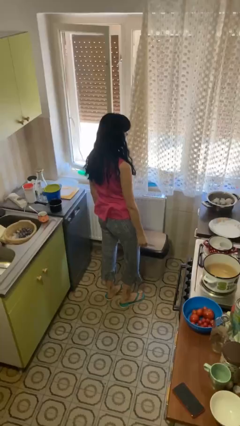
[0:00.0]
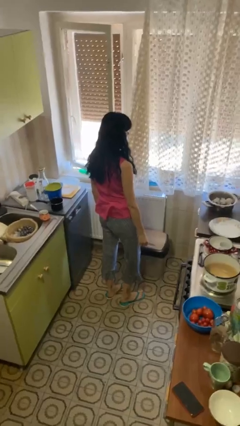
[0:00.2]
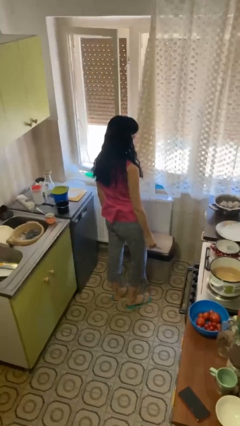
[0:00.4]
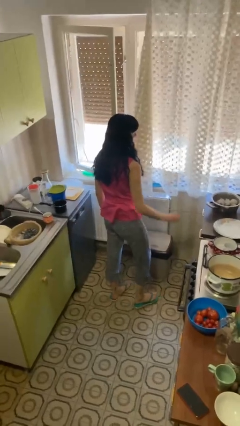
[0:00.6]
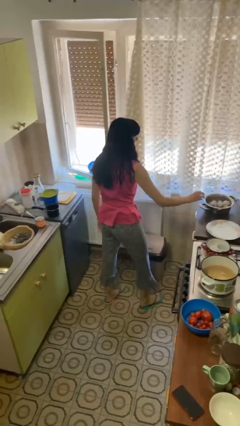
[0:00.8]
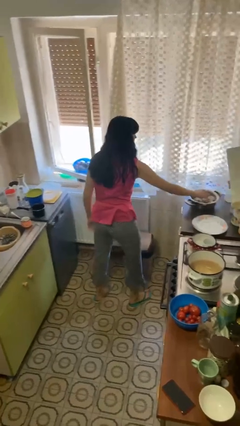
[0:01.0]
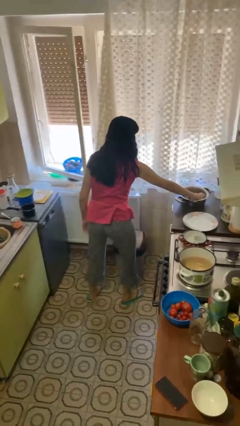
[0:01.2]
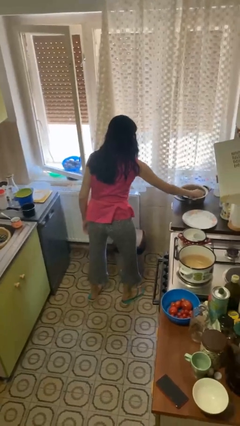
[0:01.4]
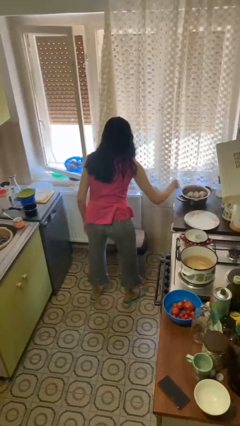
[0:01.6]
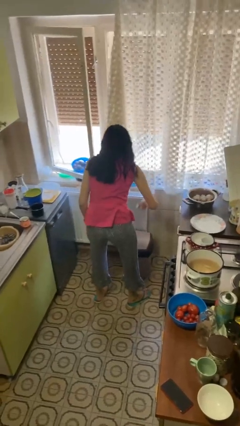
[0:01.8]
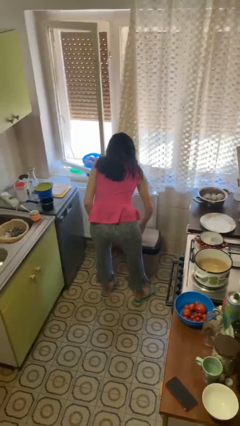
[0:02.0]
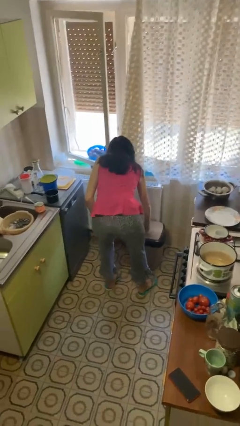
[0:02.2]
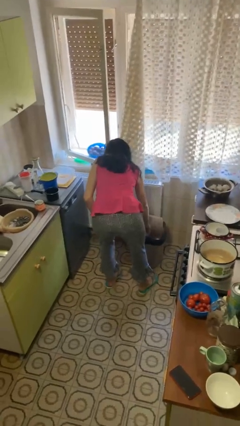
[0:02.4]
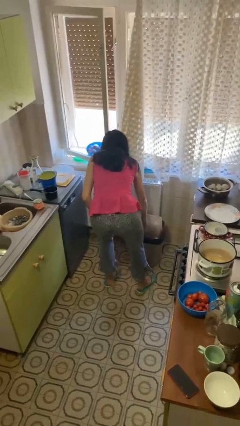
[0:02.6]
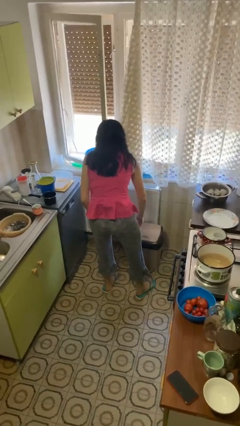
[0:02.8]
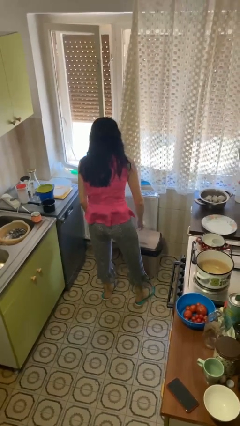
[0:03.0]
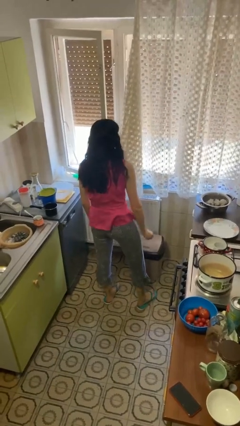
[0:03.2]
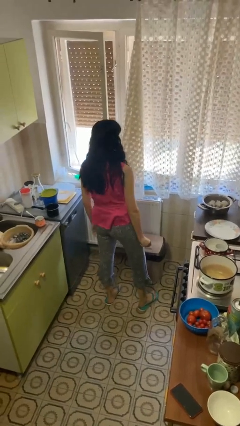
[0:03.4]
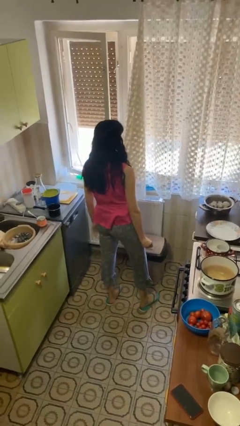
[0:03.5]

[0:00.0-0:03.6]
person discards trash

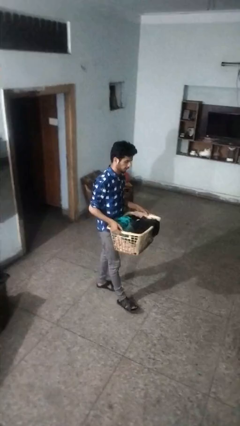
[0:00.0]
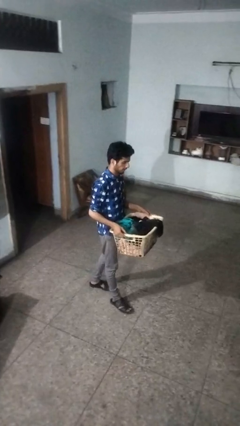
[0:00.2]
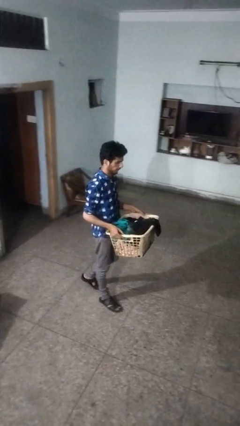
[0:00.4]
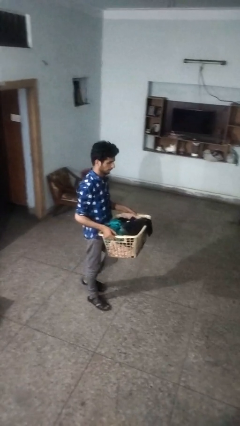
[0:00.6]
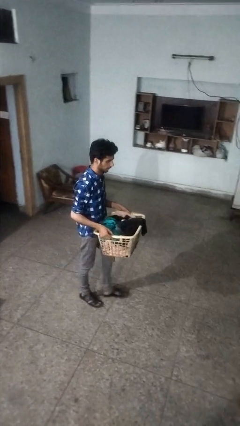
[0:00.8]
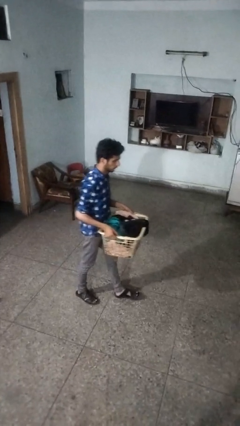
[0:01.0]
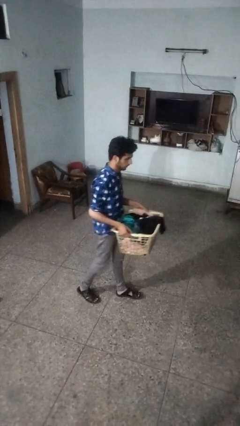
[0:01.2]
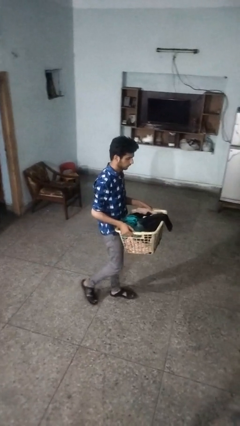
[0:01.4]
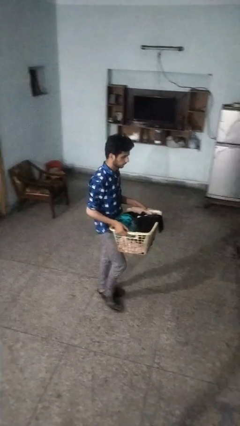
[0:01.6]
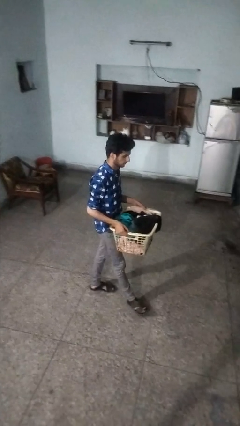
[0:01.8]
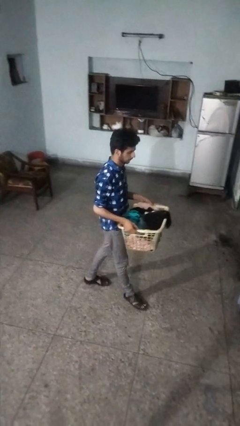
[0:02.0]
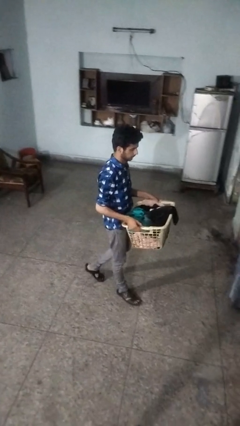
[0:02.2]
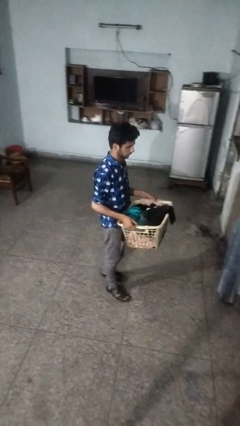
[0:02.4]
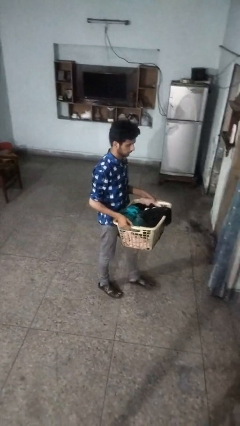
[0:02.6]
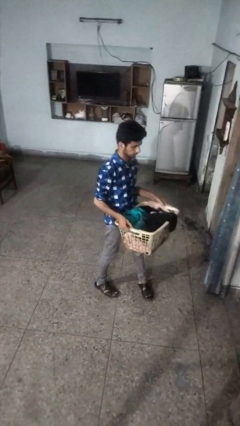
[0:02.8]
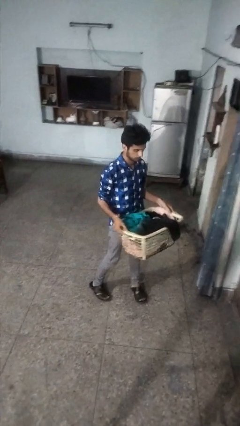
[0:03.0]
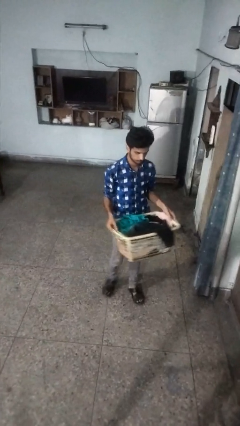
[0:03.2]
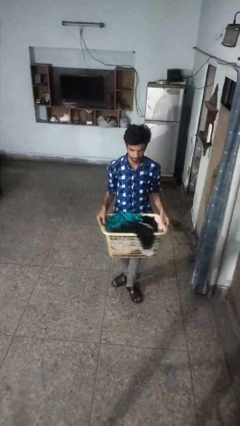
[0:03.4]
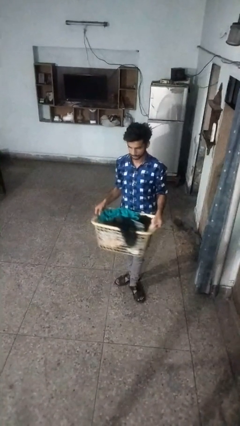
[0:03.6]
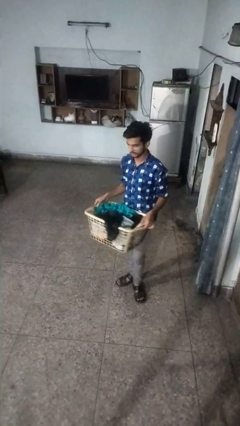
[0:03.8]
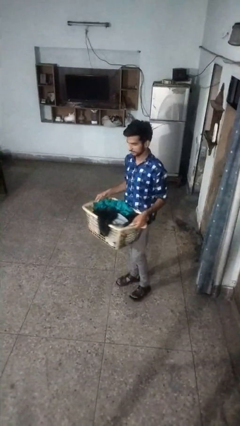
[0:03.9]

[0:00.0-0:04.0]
person carries laundry basket

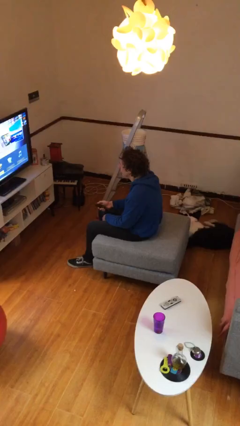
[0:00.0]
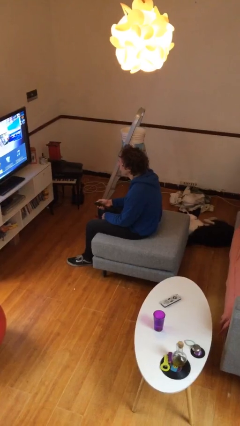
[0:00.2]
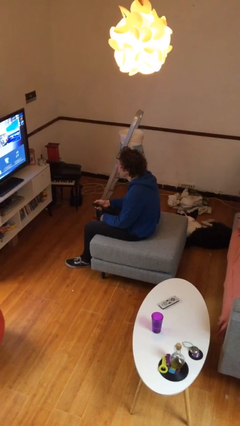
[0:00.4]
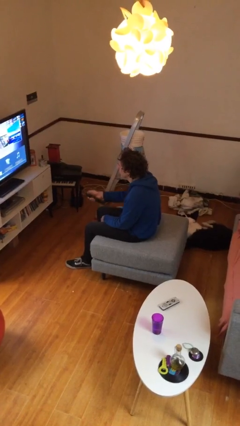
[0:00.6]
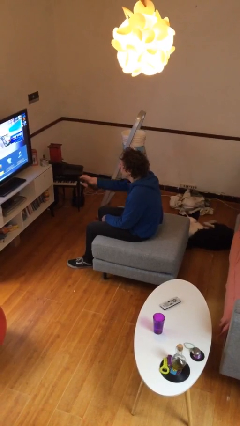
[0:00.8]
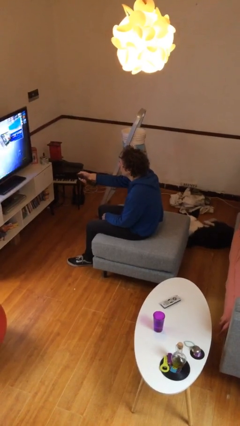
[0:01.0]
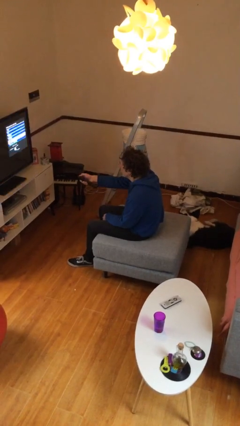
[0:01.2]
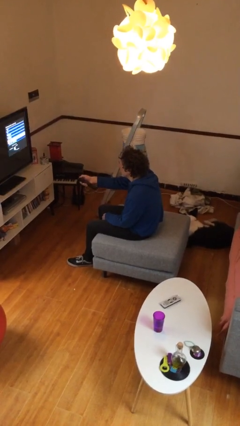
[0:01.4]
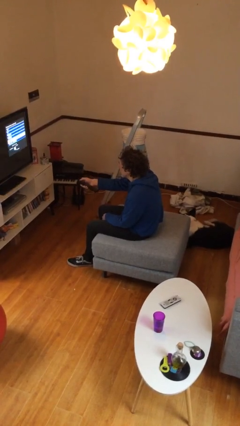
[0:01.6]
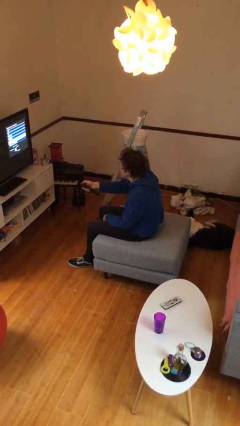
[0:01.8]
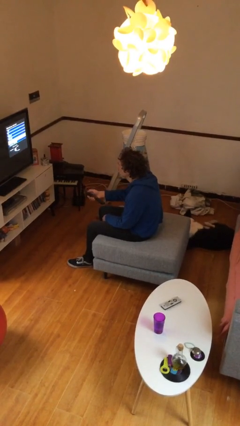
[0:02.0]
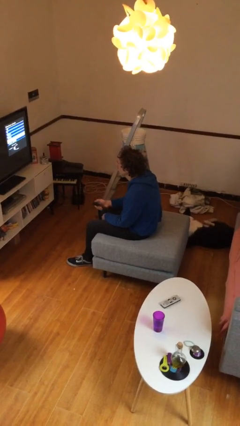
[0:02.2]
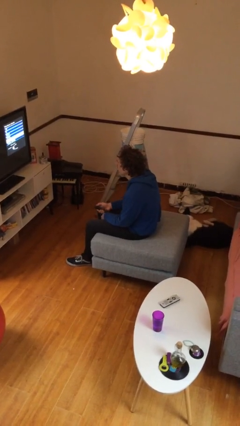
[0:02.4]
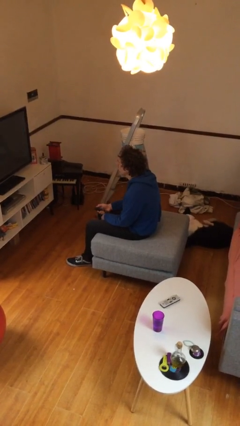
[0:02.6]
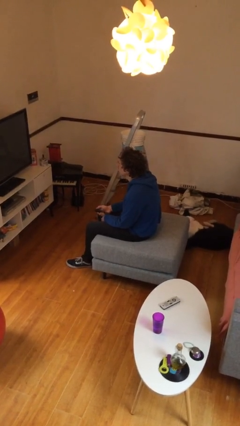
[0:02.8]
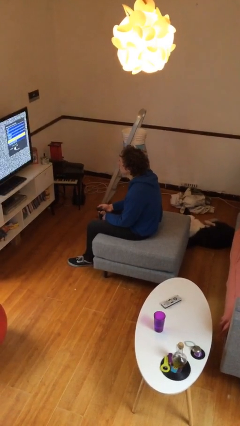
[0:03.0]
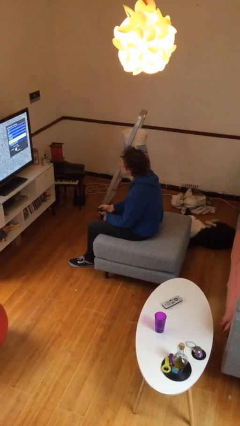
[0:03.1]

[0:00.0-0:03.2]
person uses television remote

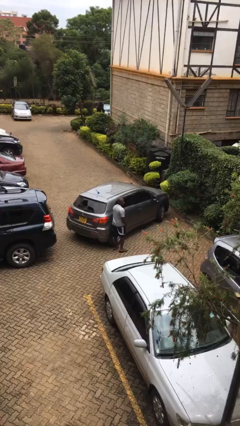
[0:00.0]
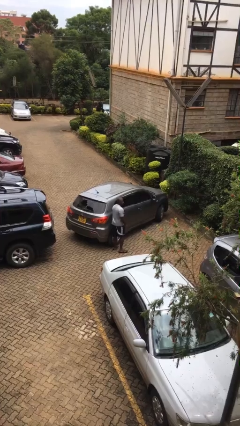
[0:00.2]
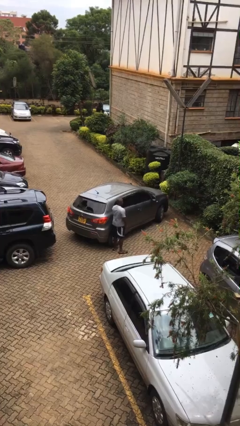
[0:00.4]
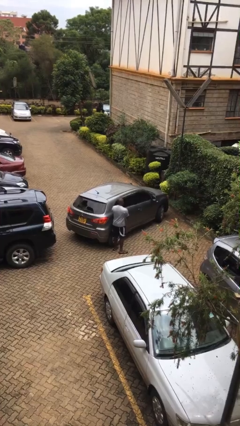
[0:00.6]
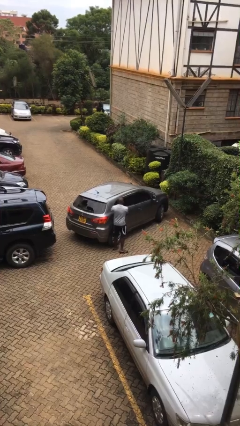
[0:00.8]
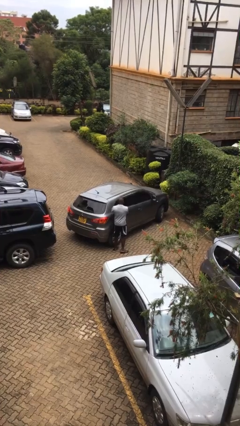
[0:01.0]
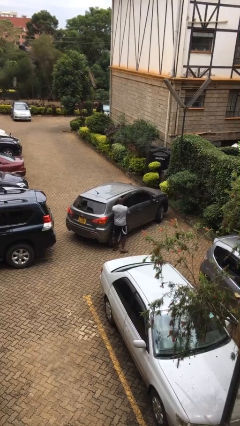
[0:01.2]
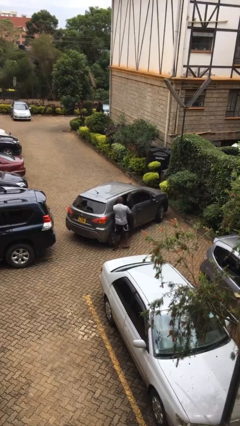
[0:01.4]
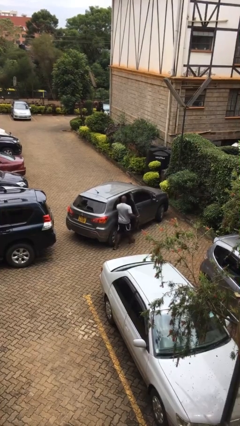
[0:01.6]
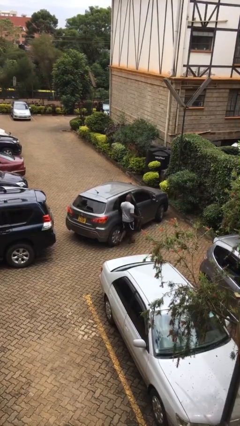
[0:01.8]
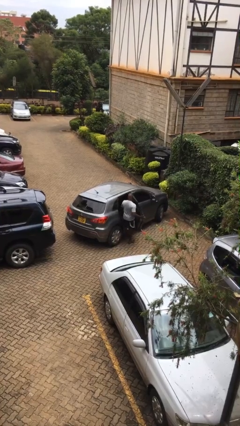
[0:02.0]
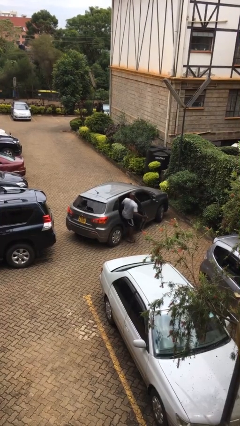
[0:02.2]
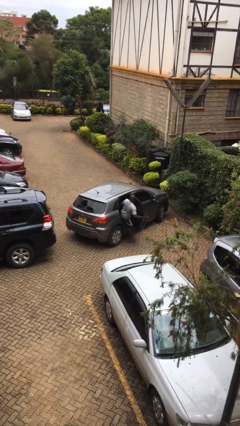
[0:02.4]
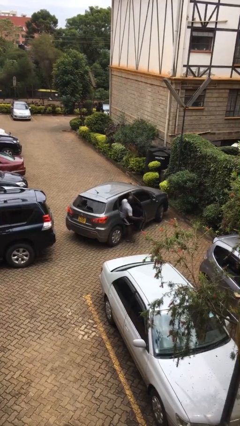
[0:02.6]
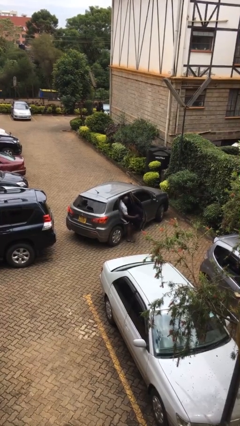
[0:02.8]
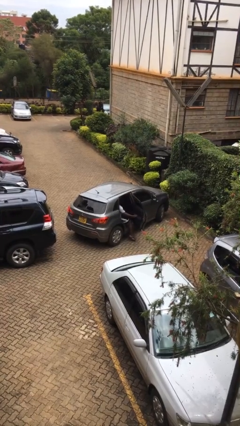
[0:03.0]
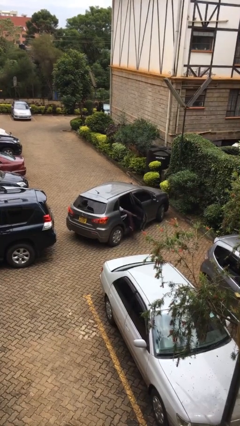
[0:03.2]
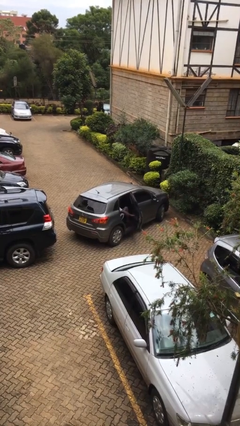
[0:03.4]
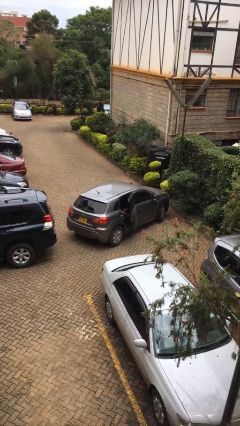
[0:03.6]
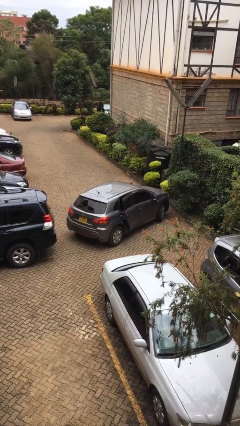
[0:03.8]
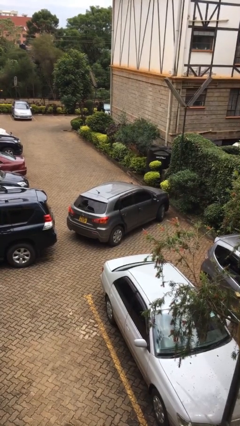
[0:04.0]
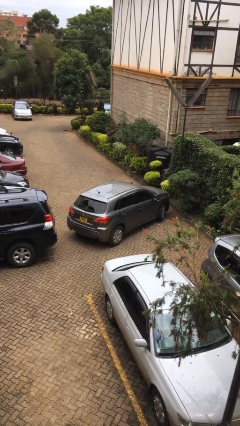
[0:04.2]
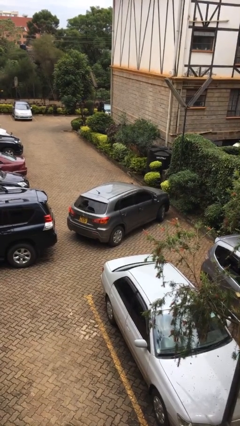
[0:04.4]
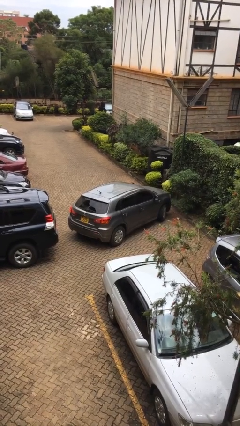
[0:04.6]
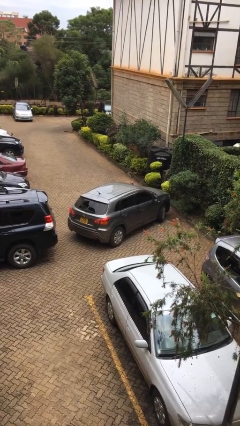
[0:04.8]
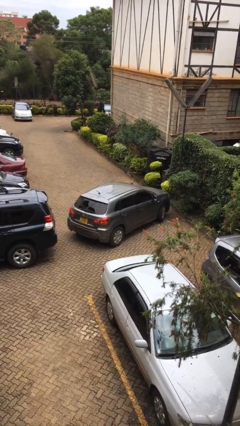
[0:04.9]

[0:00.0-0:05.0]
car picks up person

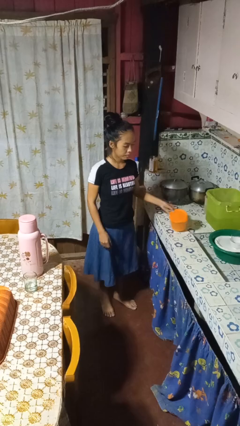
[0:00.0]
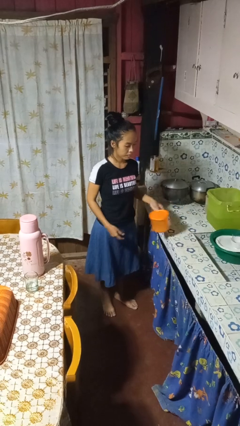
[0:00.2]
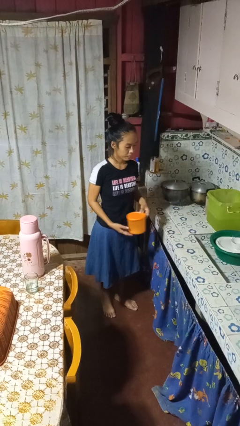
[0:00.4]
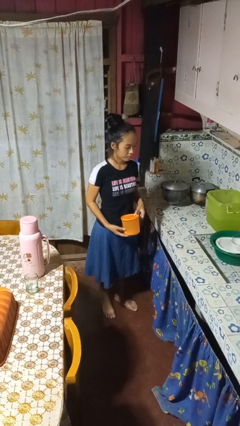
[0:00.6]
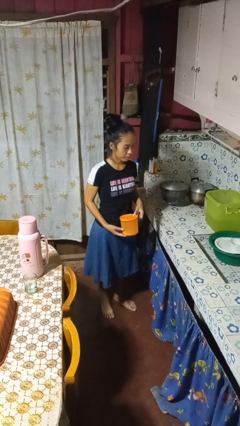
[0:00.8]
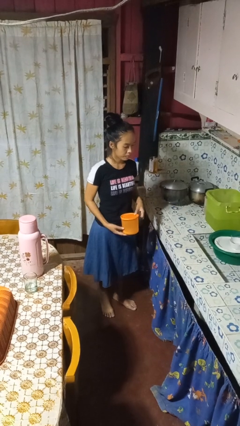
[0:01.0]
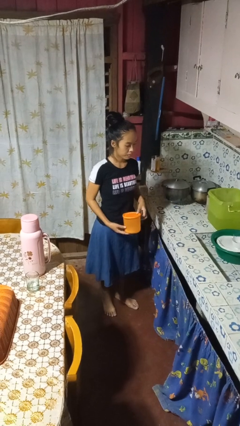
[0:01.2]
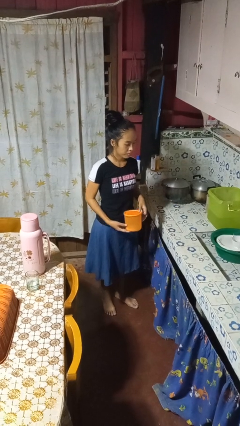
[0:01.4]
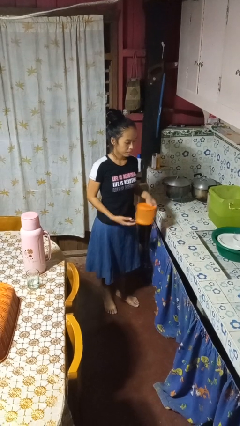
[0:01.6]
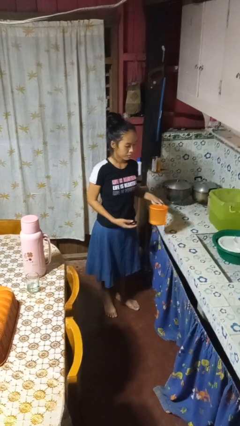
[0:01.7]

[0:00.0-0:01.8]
person picks up object from countertop
